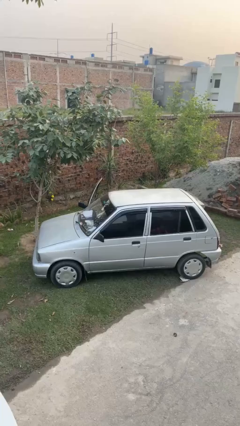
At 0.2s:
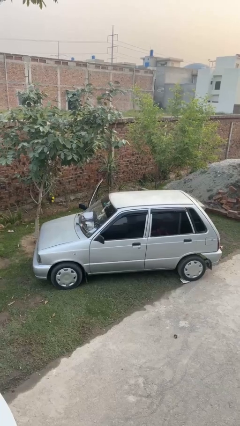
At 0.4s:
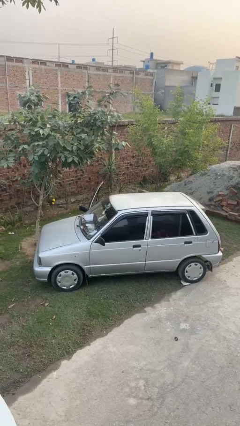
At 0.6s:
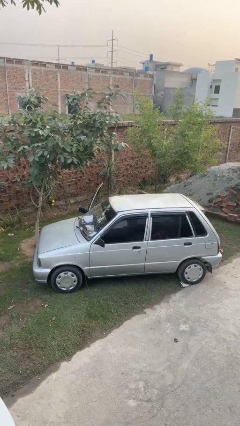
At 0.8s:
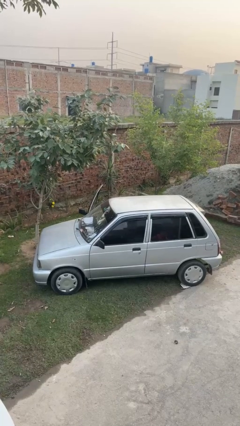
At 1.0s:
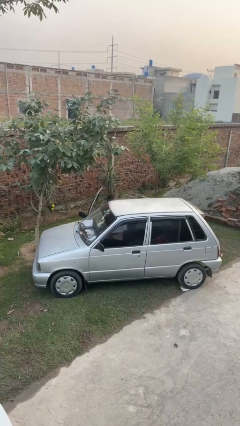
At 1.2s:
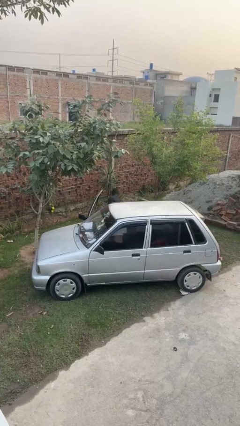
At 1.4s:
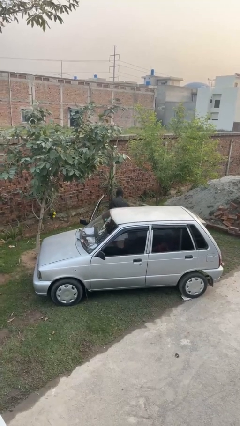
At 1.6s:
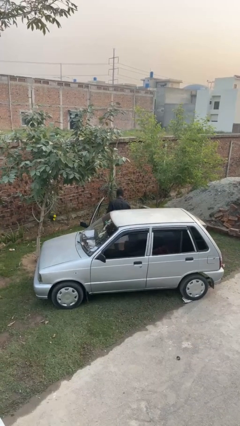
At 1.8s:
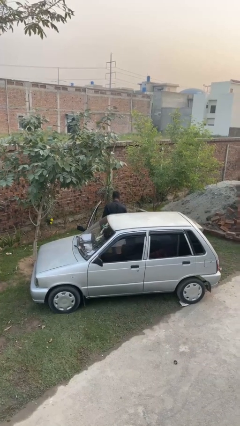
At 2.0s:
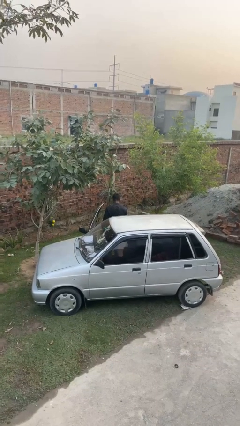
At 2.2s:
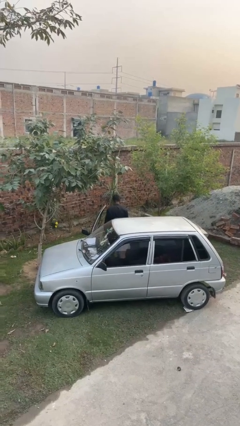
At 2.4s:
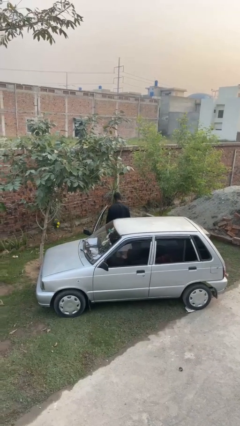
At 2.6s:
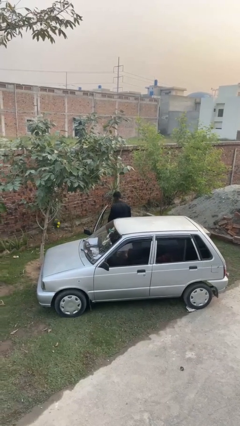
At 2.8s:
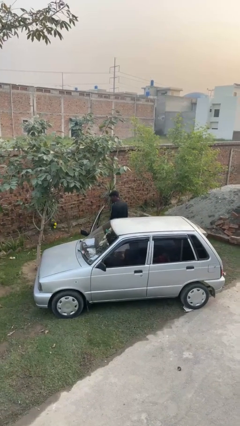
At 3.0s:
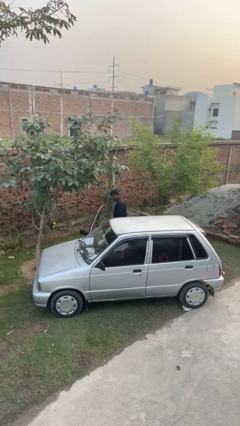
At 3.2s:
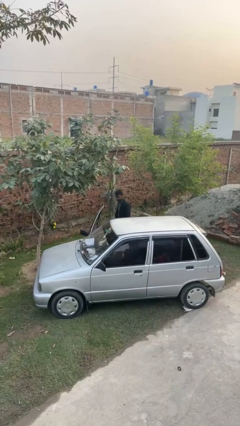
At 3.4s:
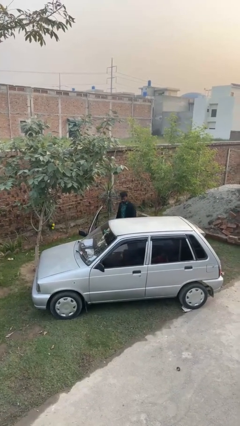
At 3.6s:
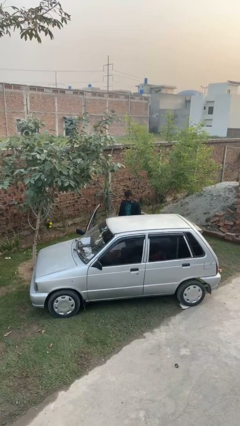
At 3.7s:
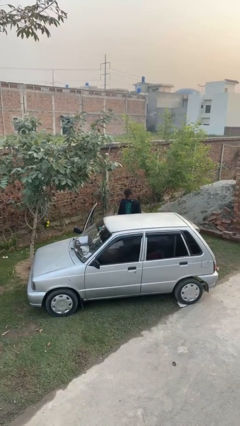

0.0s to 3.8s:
person exits car

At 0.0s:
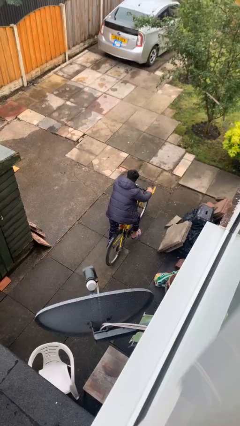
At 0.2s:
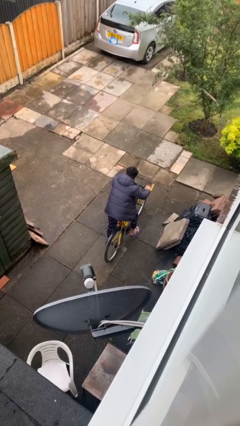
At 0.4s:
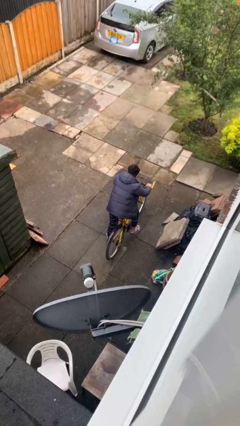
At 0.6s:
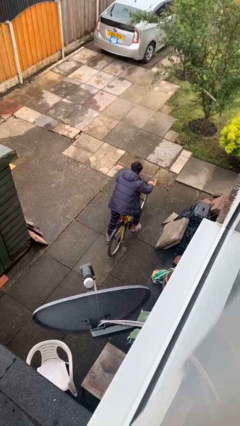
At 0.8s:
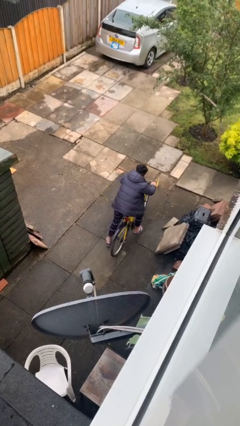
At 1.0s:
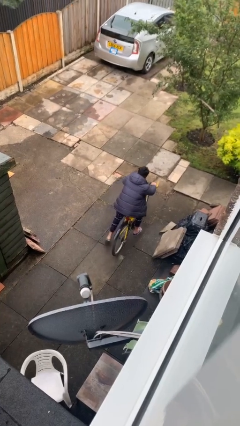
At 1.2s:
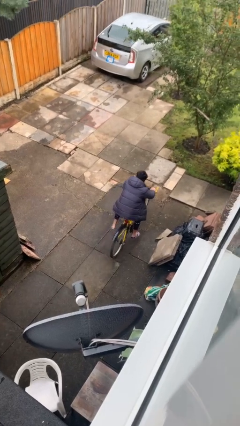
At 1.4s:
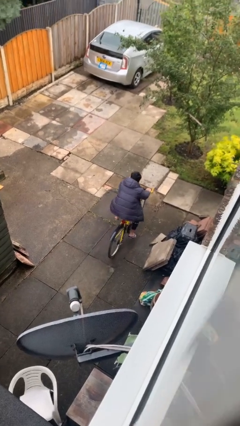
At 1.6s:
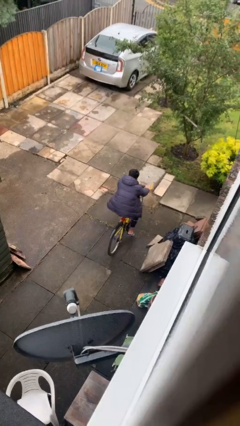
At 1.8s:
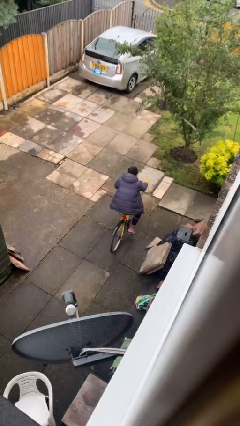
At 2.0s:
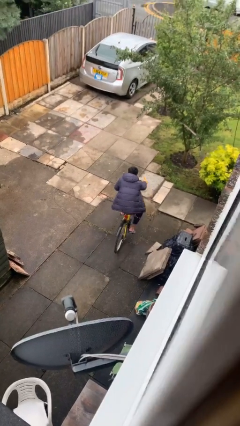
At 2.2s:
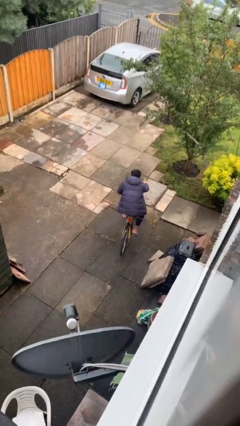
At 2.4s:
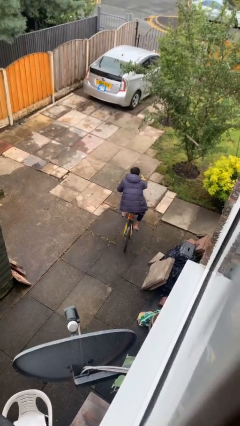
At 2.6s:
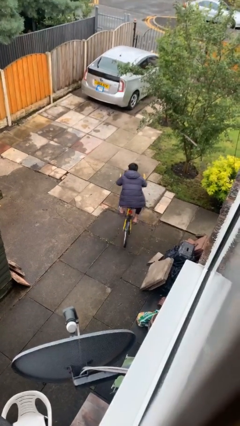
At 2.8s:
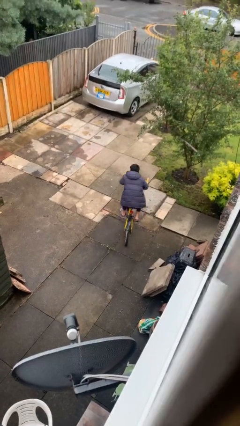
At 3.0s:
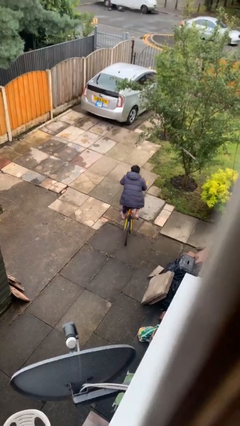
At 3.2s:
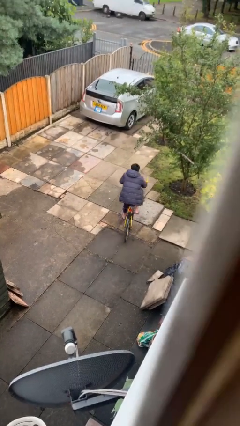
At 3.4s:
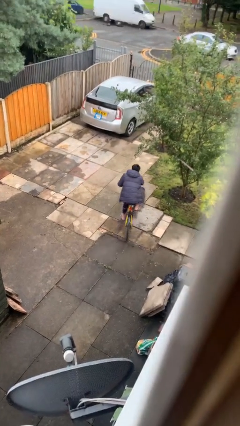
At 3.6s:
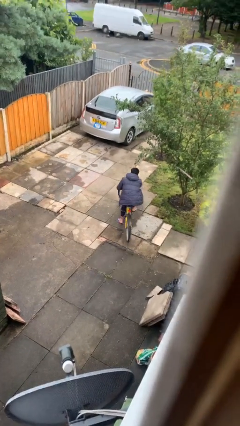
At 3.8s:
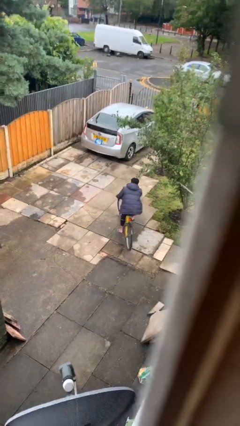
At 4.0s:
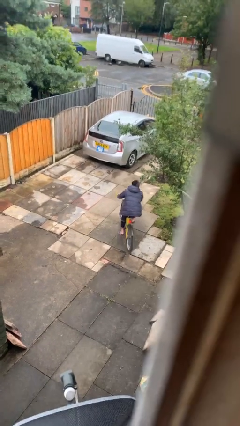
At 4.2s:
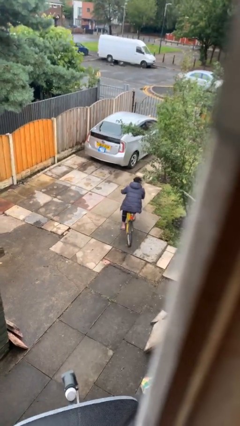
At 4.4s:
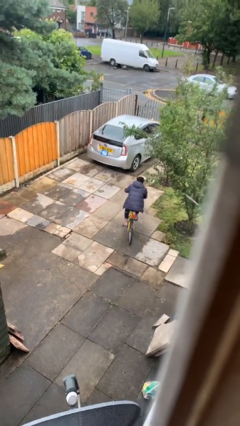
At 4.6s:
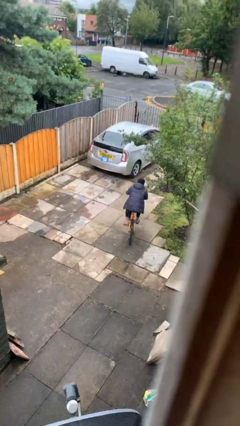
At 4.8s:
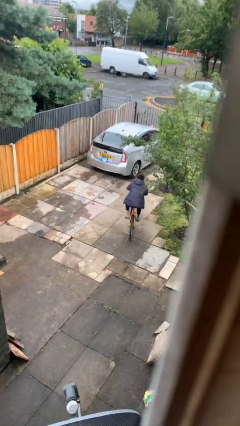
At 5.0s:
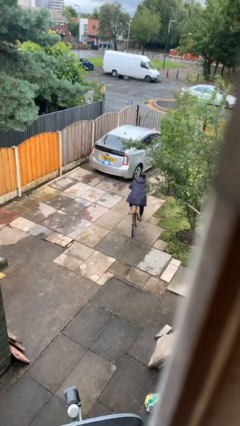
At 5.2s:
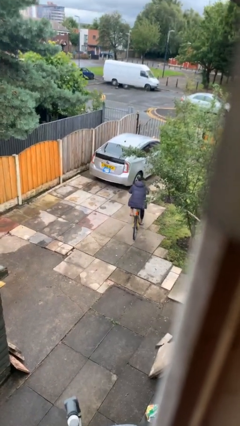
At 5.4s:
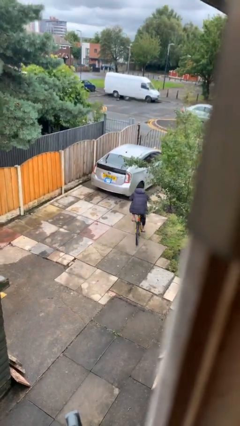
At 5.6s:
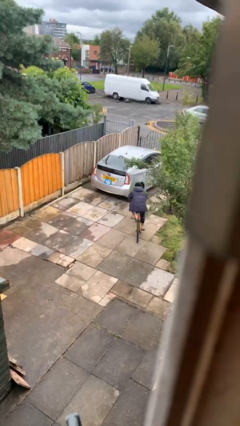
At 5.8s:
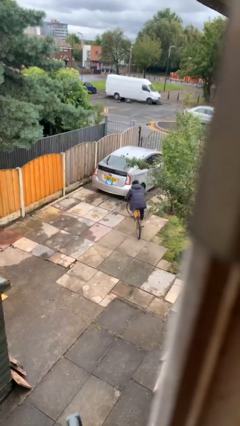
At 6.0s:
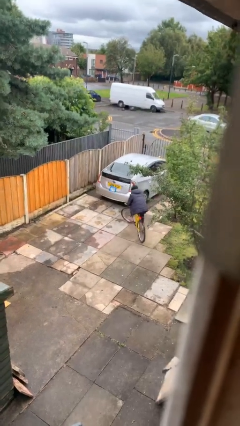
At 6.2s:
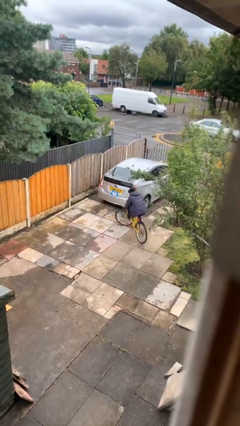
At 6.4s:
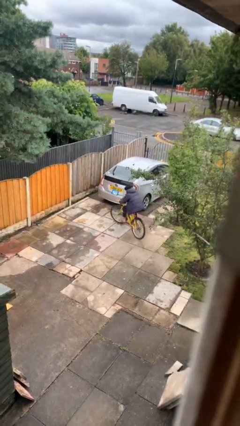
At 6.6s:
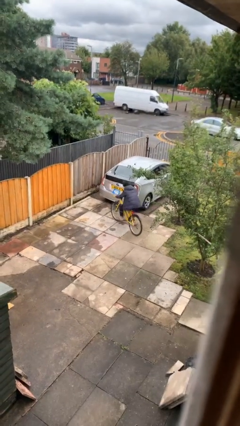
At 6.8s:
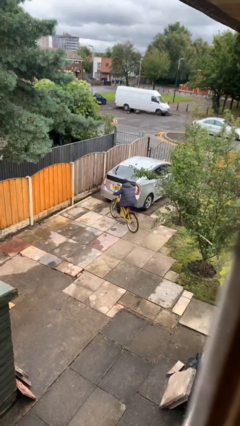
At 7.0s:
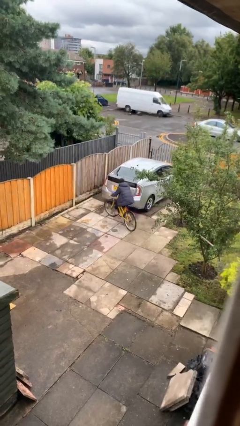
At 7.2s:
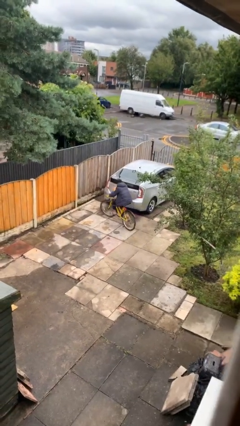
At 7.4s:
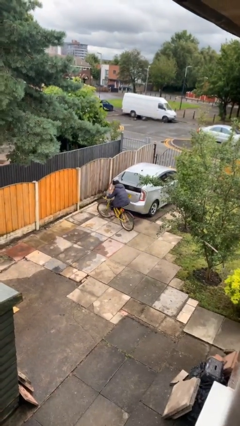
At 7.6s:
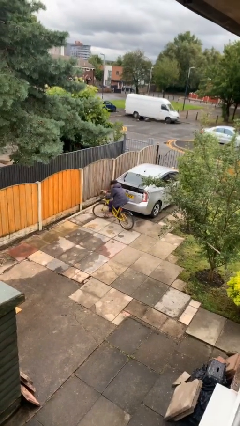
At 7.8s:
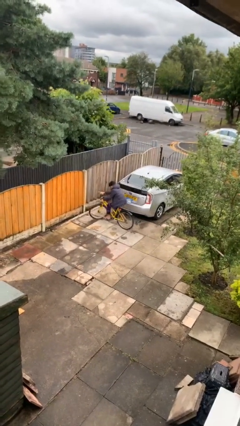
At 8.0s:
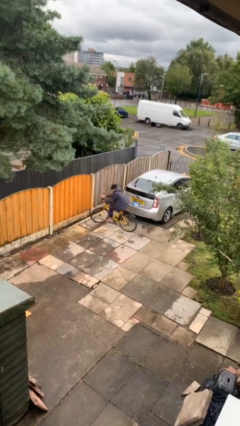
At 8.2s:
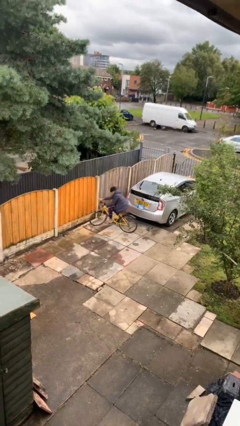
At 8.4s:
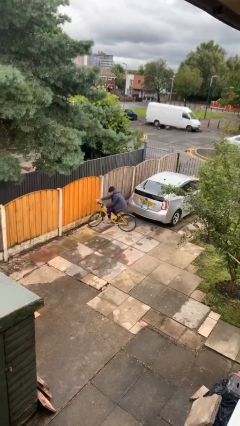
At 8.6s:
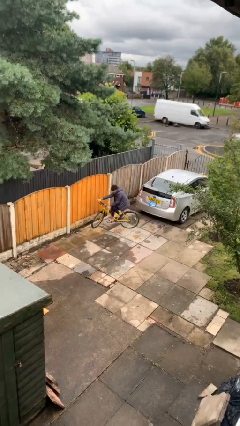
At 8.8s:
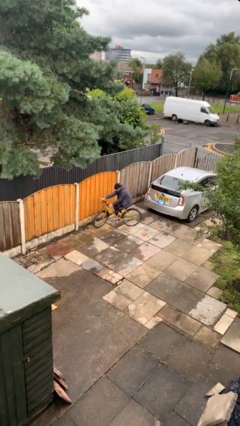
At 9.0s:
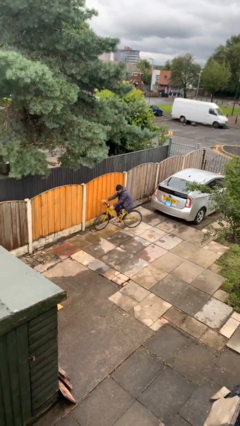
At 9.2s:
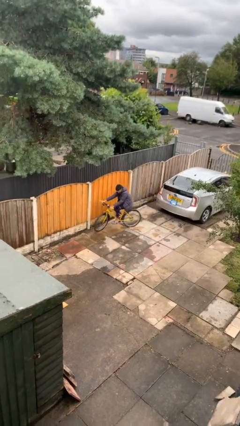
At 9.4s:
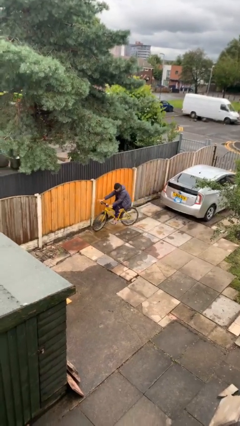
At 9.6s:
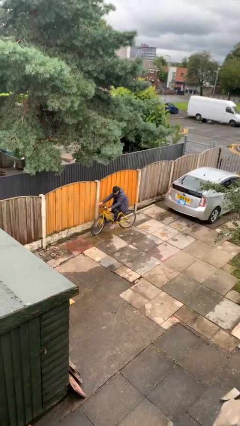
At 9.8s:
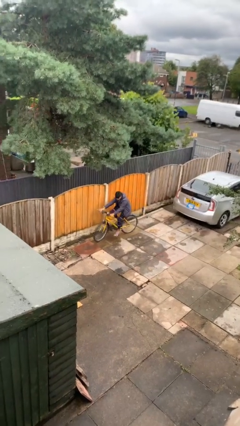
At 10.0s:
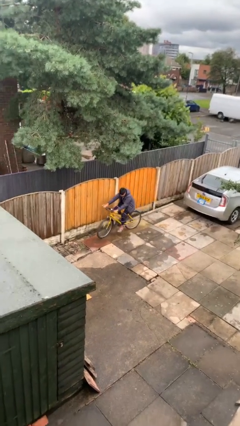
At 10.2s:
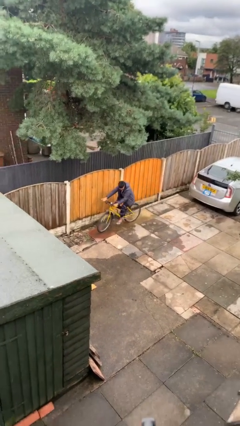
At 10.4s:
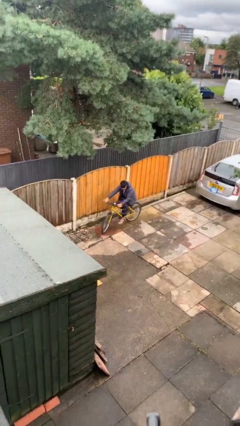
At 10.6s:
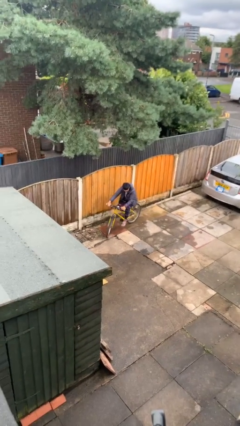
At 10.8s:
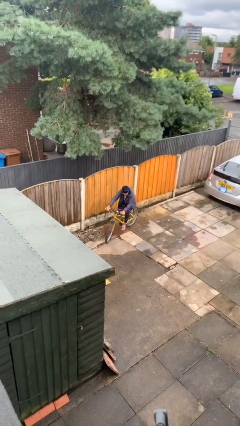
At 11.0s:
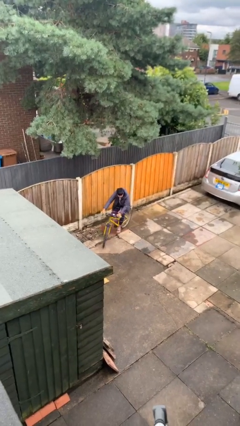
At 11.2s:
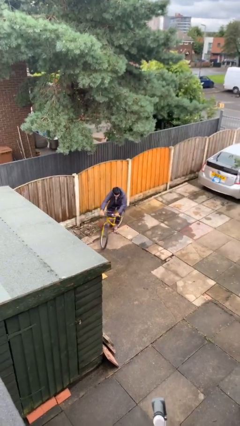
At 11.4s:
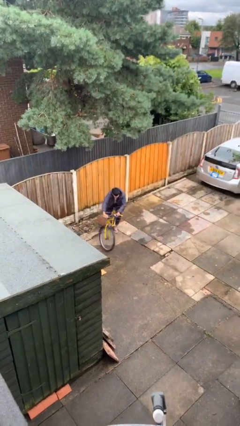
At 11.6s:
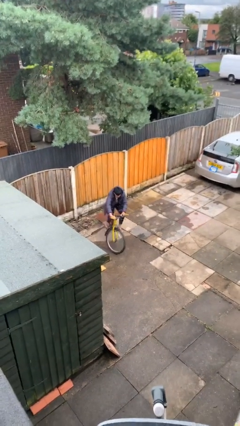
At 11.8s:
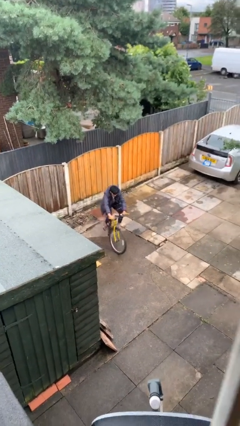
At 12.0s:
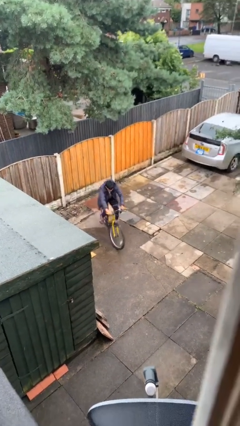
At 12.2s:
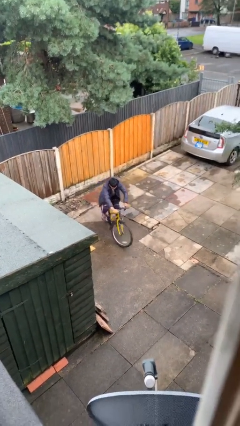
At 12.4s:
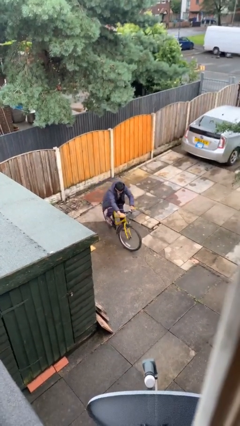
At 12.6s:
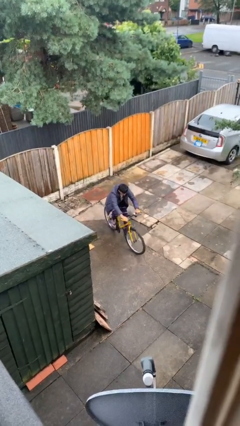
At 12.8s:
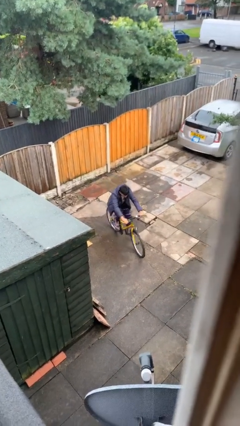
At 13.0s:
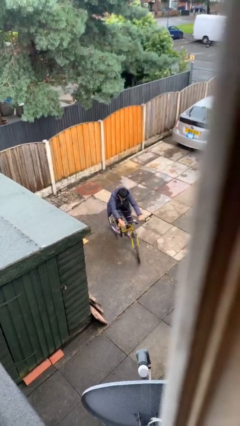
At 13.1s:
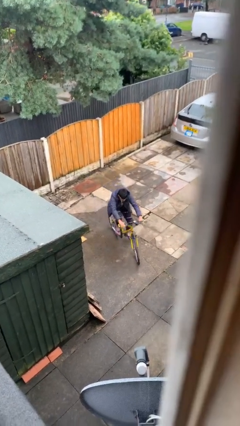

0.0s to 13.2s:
person rides bicycle

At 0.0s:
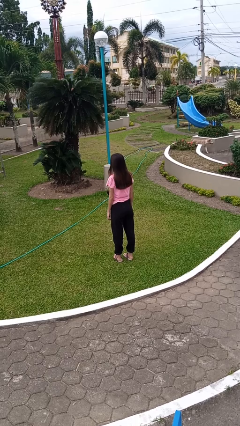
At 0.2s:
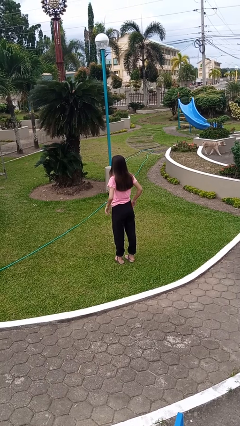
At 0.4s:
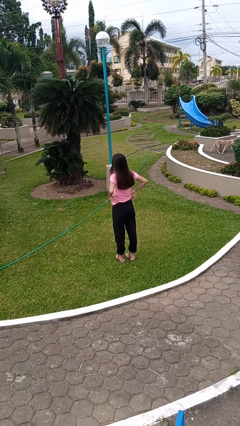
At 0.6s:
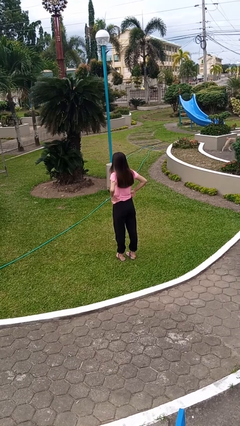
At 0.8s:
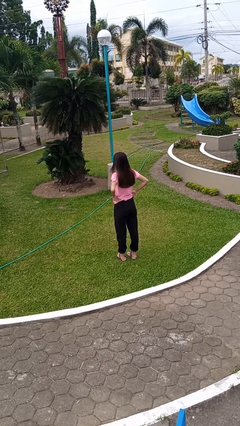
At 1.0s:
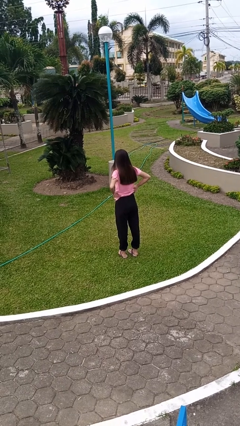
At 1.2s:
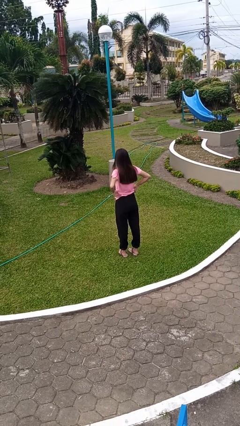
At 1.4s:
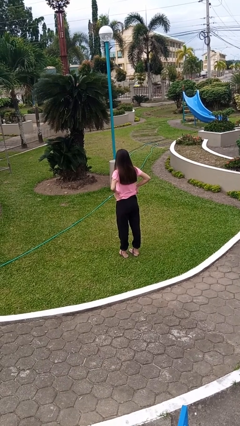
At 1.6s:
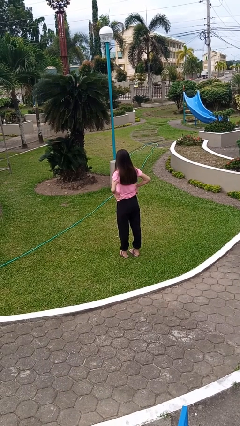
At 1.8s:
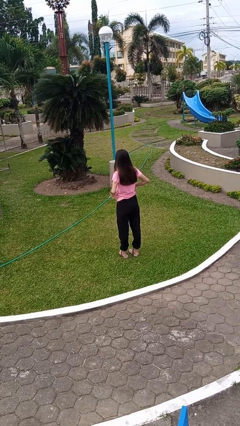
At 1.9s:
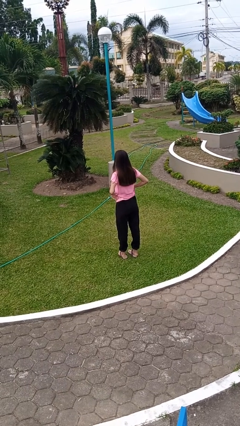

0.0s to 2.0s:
person hikes up pants
